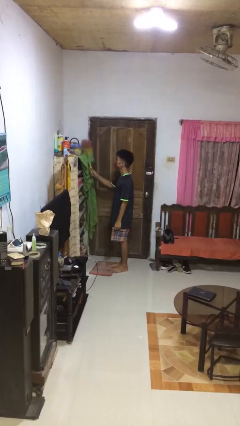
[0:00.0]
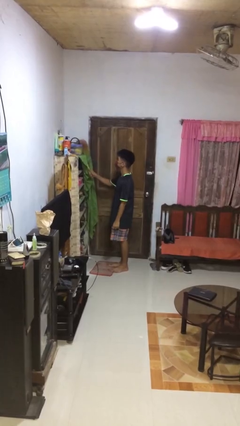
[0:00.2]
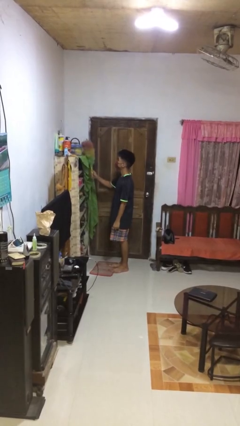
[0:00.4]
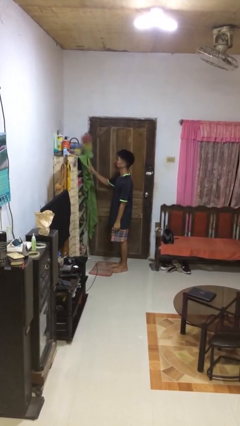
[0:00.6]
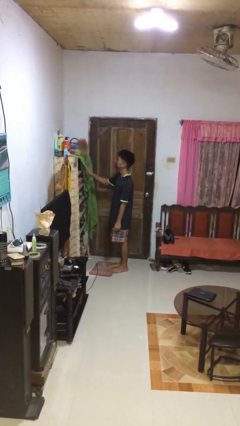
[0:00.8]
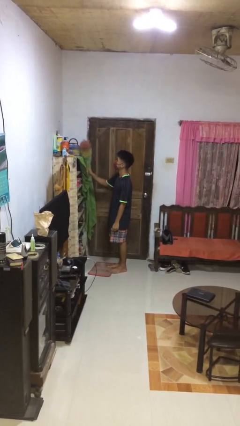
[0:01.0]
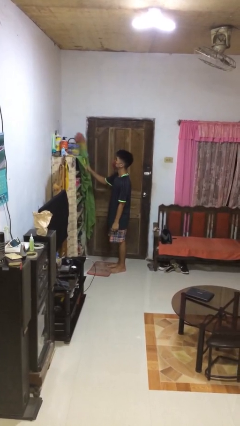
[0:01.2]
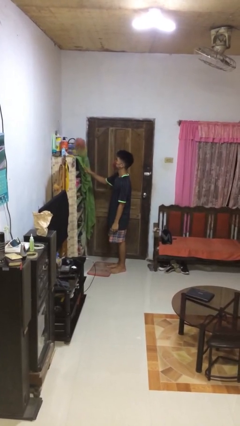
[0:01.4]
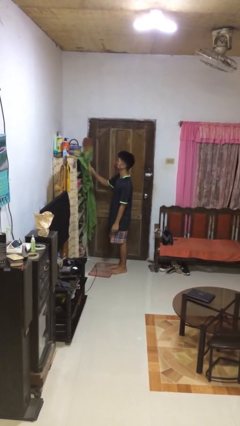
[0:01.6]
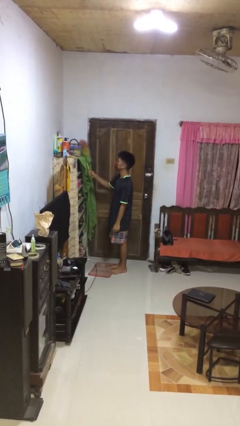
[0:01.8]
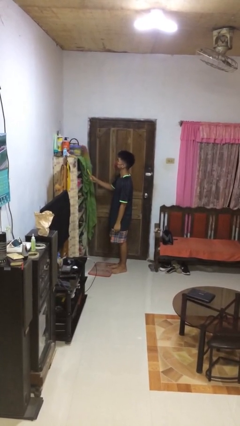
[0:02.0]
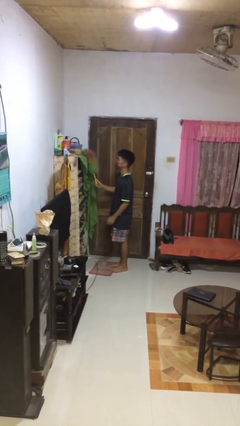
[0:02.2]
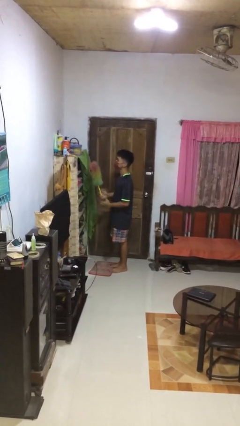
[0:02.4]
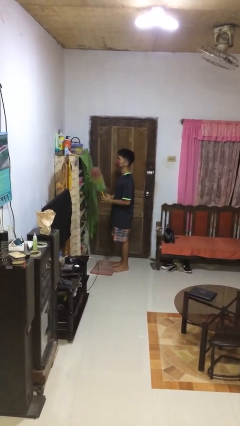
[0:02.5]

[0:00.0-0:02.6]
person dusts furniture

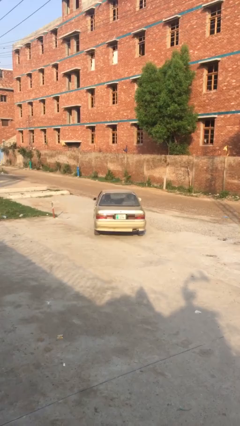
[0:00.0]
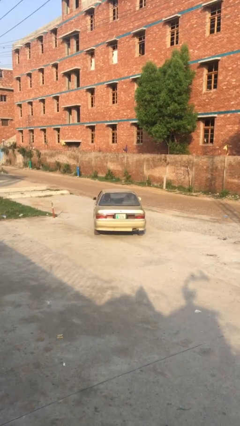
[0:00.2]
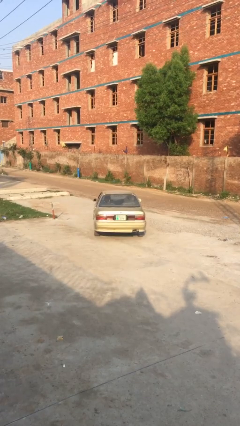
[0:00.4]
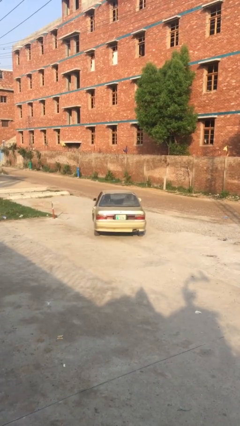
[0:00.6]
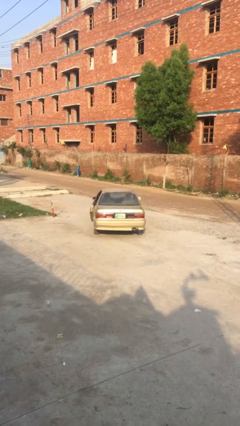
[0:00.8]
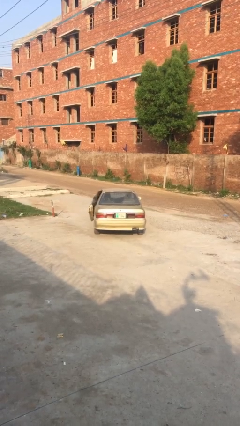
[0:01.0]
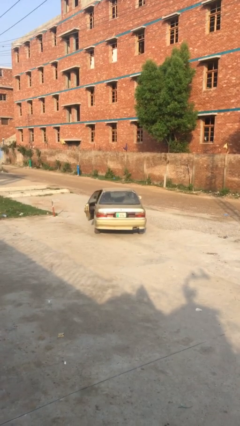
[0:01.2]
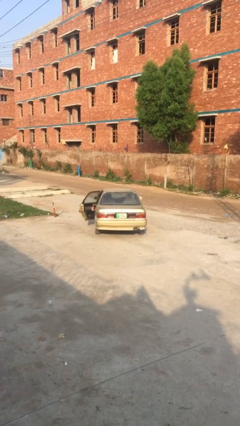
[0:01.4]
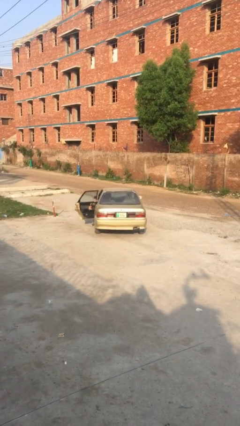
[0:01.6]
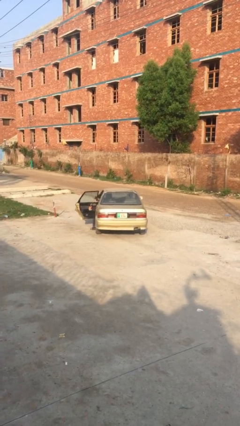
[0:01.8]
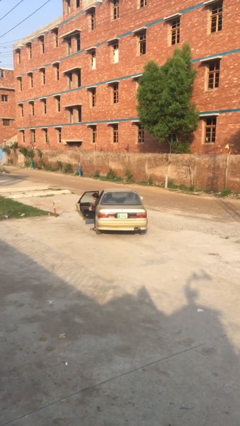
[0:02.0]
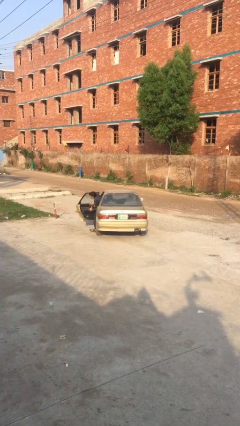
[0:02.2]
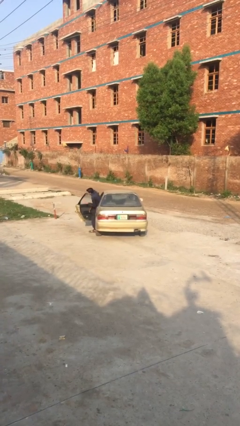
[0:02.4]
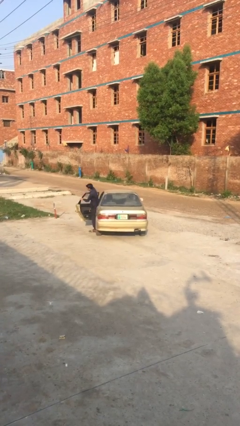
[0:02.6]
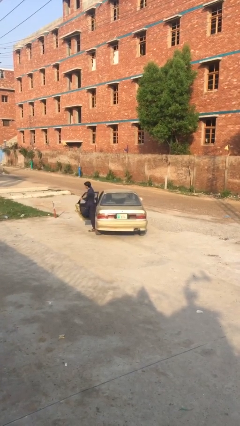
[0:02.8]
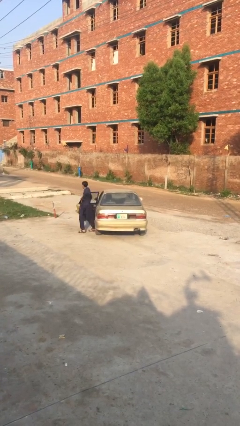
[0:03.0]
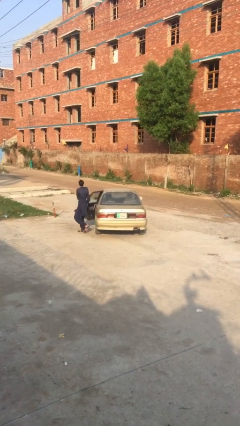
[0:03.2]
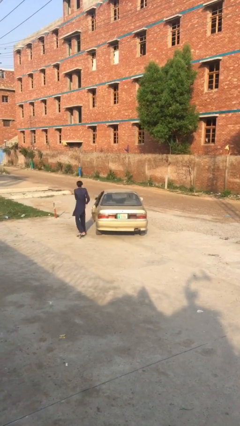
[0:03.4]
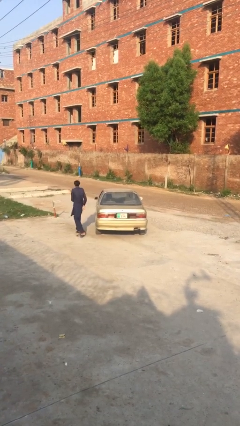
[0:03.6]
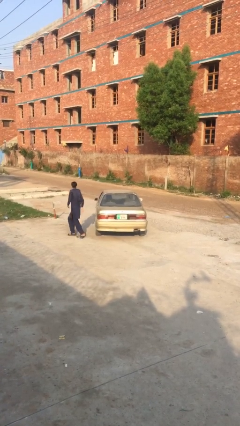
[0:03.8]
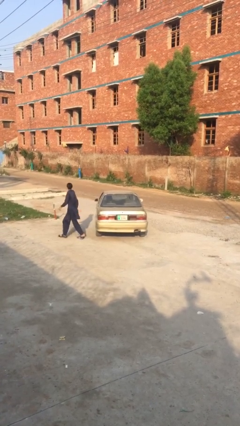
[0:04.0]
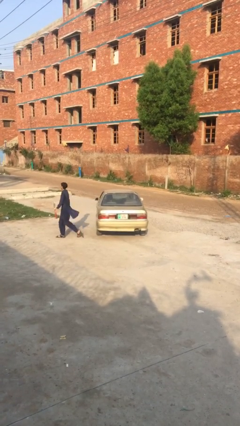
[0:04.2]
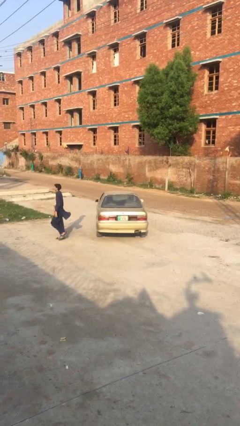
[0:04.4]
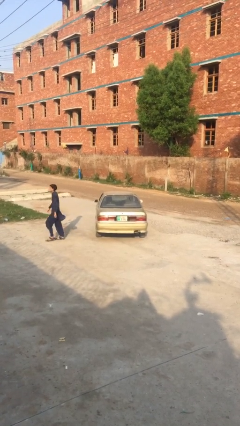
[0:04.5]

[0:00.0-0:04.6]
car drops off person

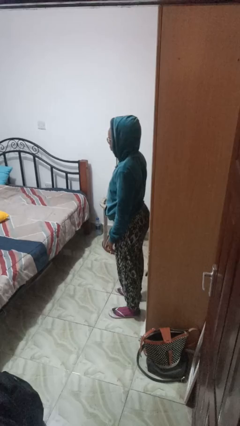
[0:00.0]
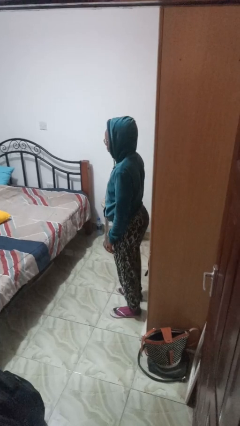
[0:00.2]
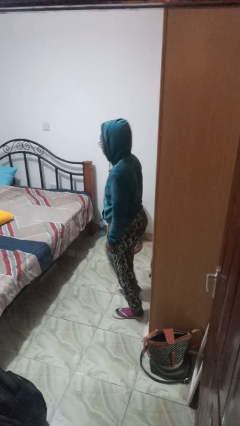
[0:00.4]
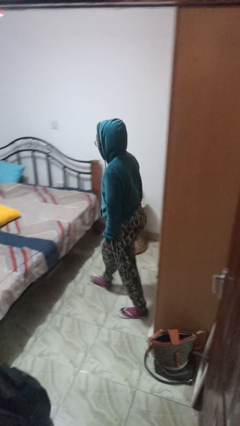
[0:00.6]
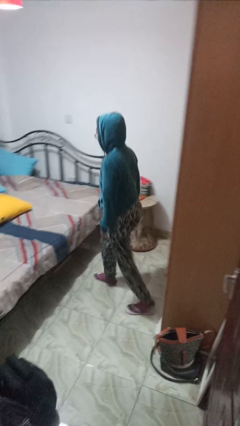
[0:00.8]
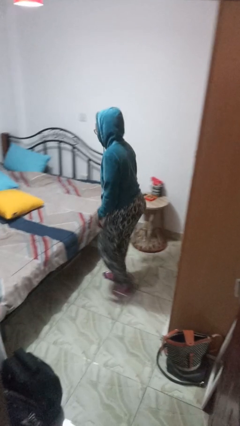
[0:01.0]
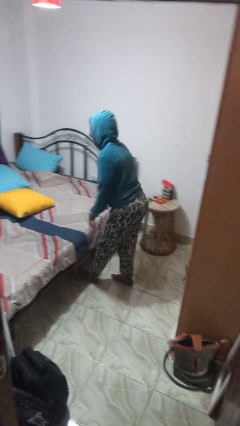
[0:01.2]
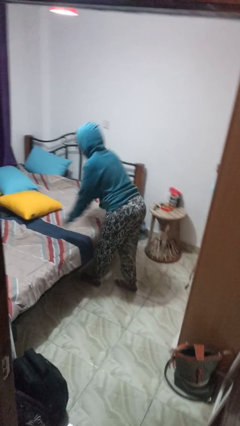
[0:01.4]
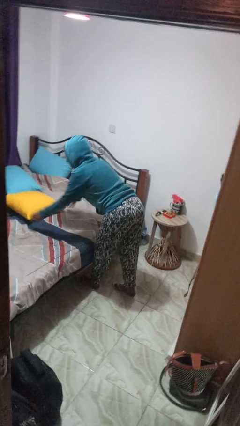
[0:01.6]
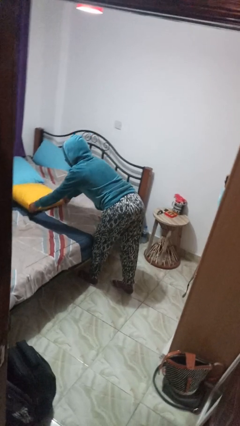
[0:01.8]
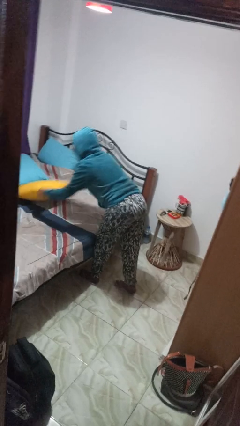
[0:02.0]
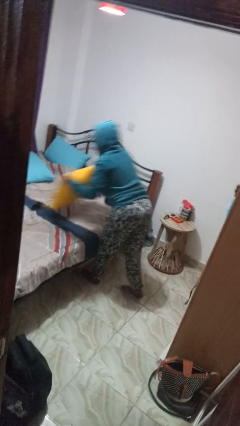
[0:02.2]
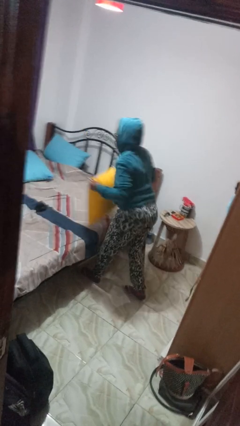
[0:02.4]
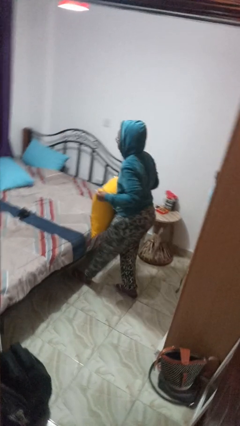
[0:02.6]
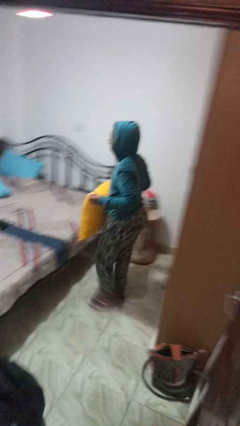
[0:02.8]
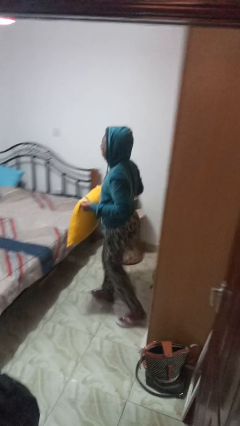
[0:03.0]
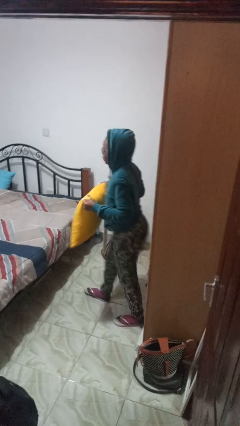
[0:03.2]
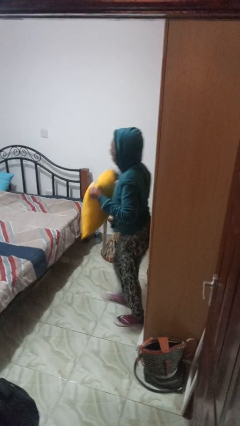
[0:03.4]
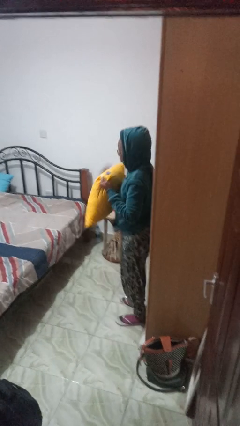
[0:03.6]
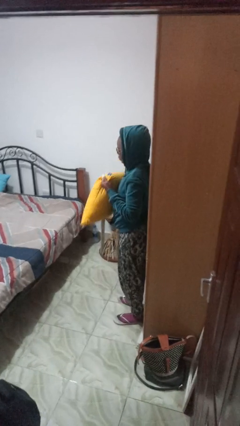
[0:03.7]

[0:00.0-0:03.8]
person picks up object from bed

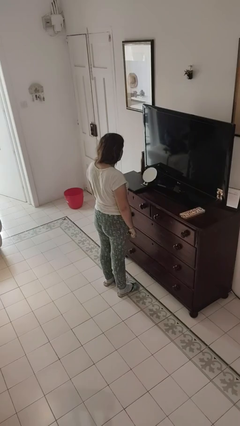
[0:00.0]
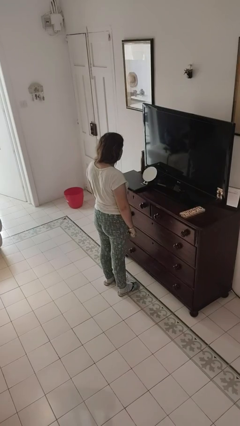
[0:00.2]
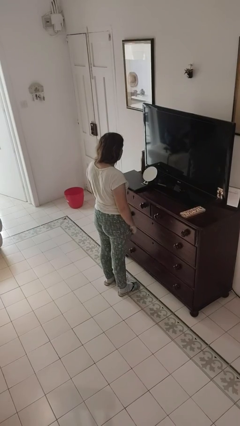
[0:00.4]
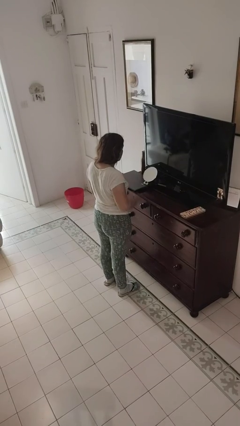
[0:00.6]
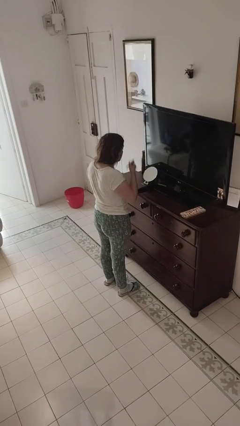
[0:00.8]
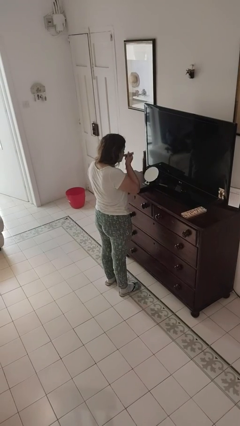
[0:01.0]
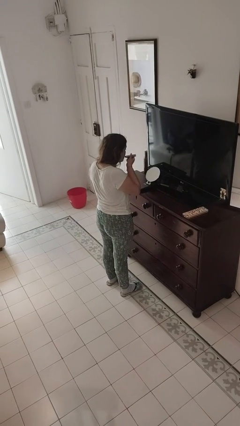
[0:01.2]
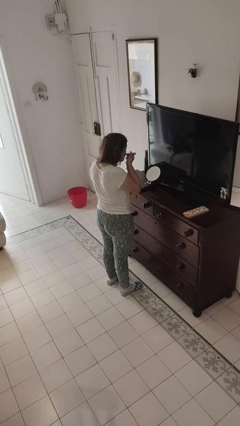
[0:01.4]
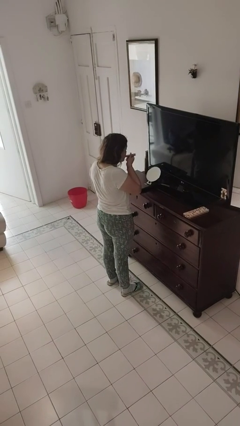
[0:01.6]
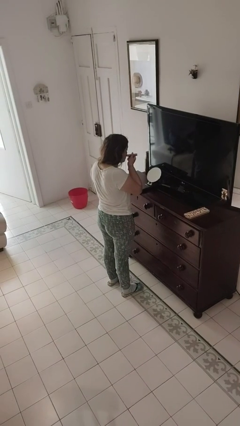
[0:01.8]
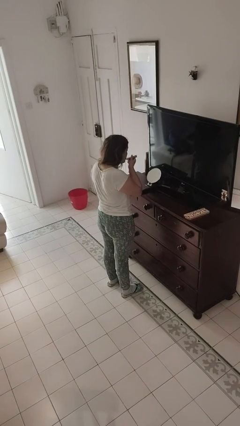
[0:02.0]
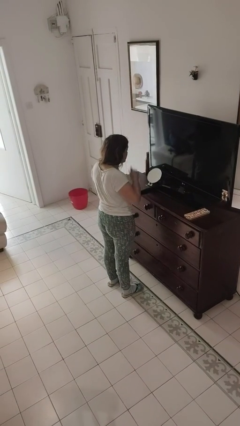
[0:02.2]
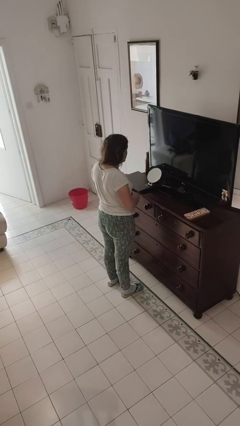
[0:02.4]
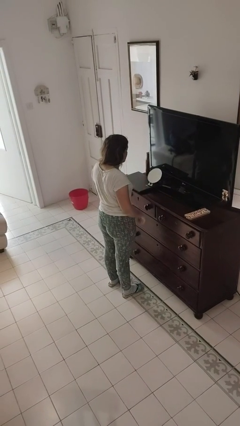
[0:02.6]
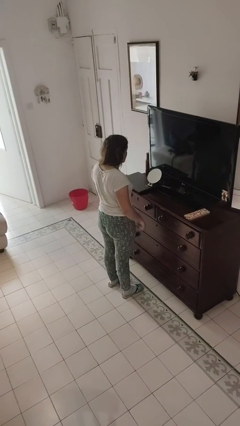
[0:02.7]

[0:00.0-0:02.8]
person applies lip makeup

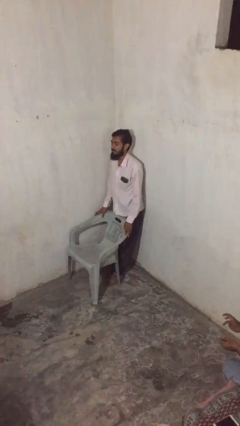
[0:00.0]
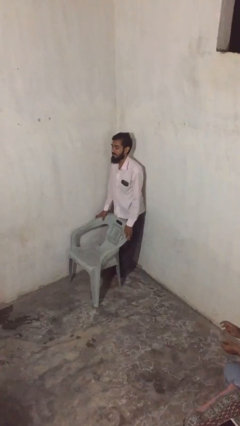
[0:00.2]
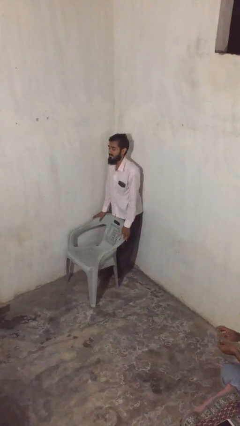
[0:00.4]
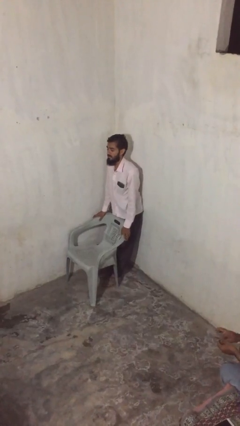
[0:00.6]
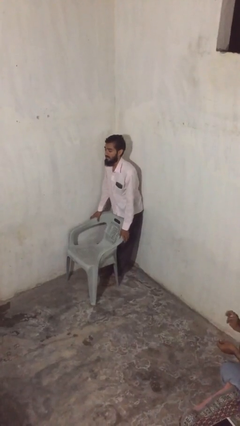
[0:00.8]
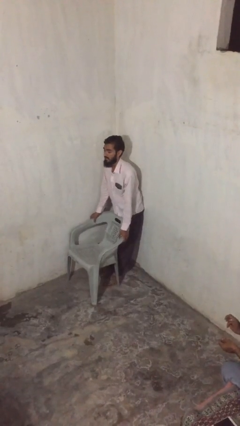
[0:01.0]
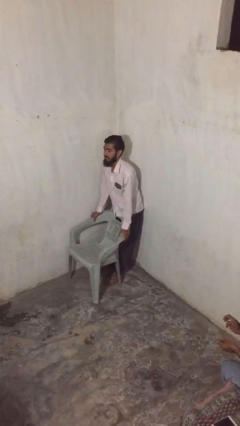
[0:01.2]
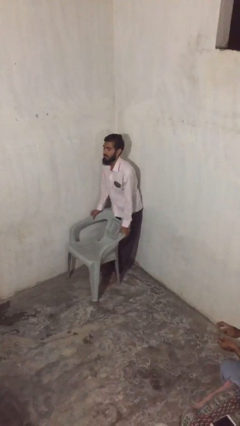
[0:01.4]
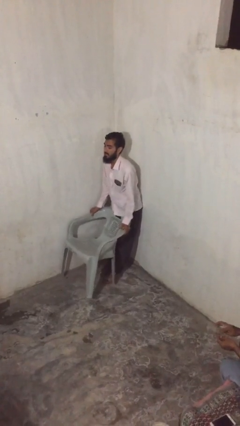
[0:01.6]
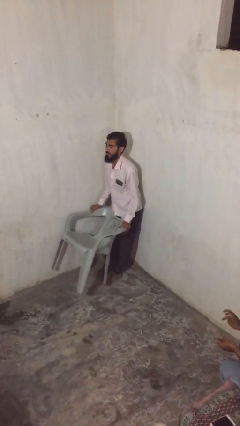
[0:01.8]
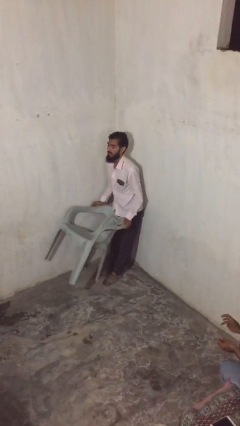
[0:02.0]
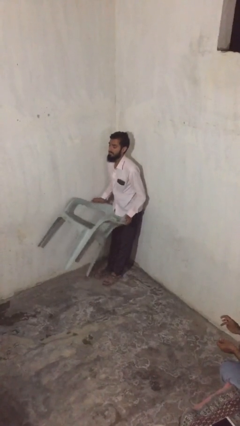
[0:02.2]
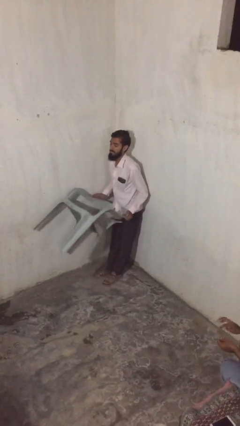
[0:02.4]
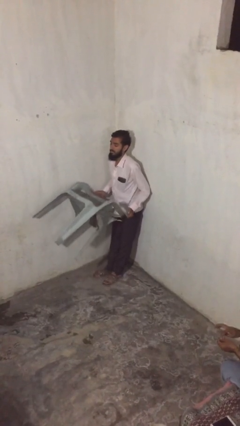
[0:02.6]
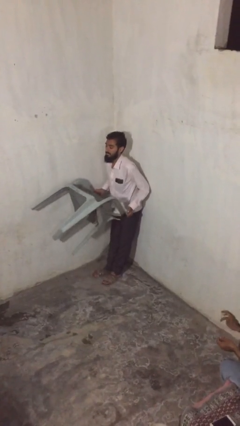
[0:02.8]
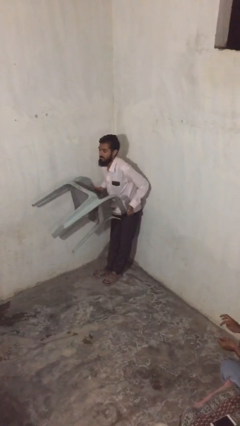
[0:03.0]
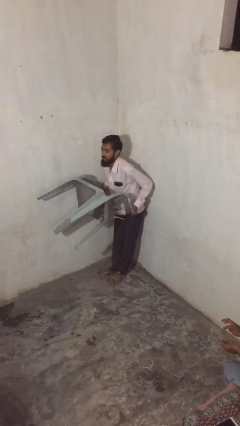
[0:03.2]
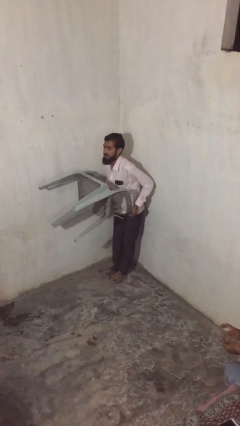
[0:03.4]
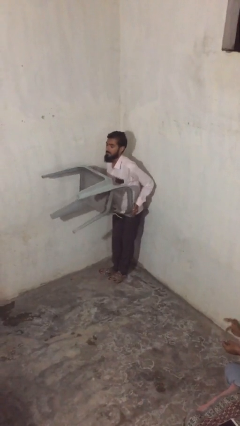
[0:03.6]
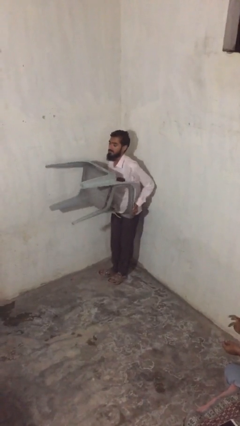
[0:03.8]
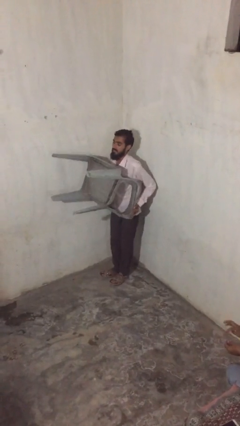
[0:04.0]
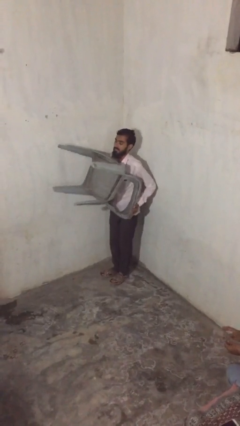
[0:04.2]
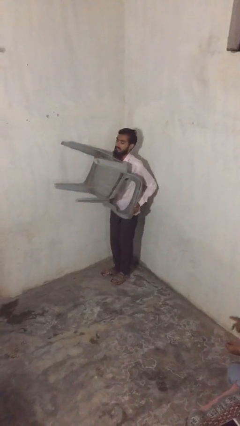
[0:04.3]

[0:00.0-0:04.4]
person picks up object from floor
